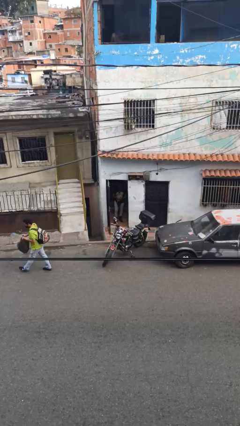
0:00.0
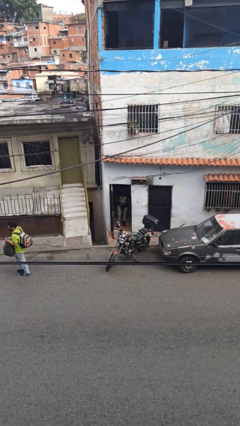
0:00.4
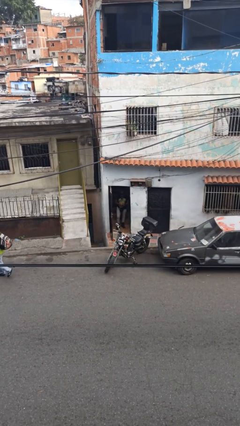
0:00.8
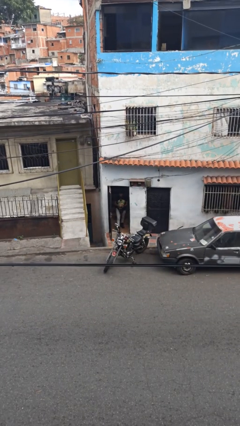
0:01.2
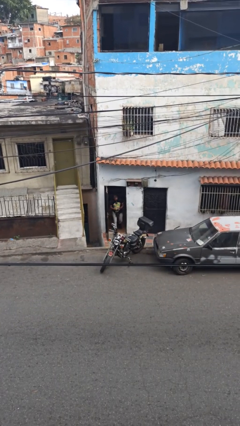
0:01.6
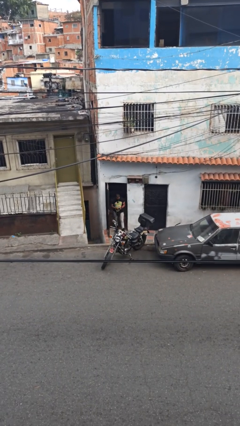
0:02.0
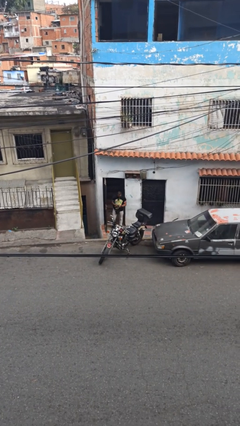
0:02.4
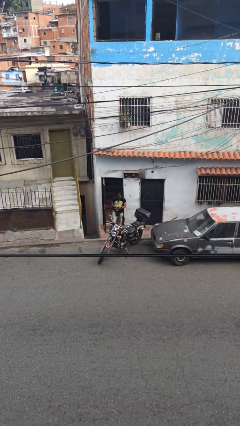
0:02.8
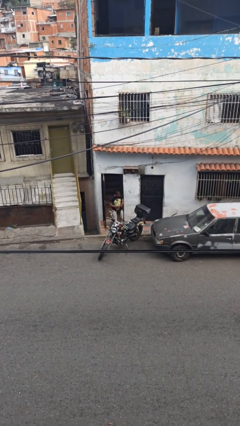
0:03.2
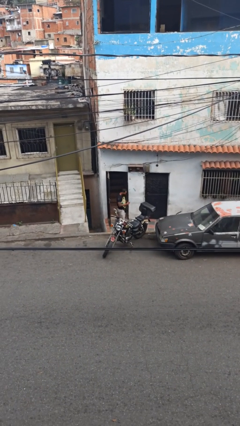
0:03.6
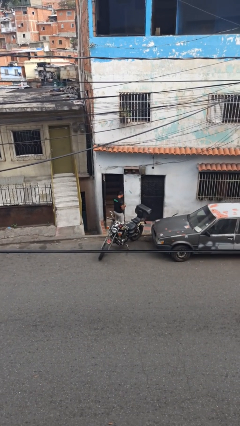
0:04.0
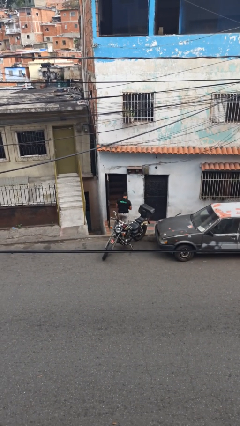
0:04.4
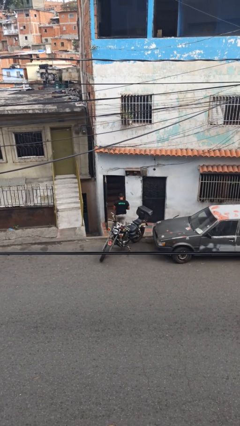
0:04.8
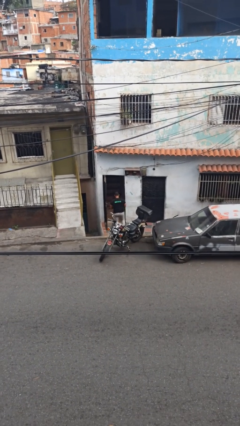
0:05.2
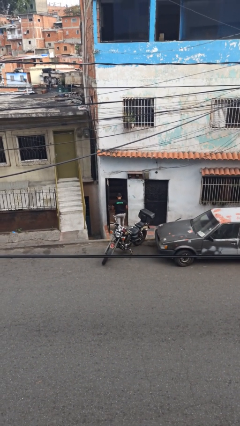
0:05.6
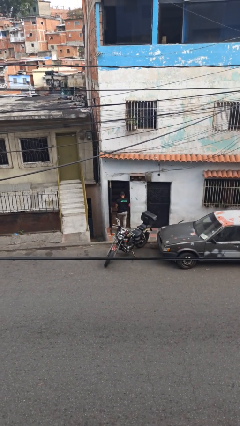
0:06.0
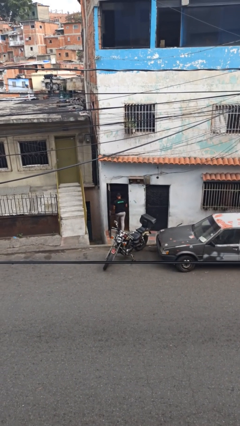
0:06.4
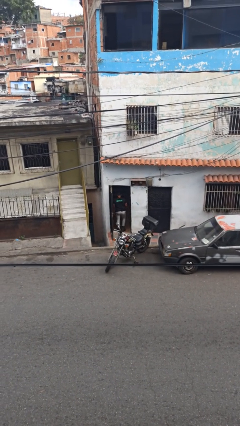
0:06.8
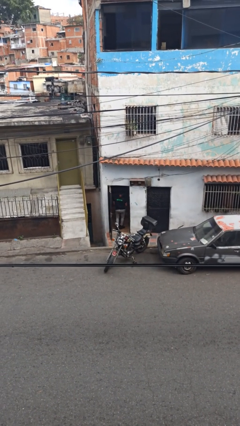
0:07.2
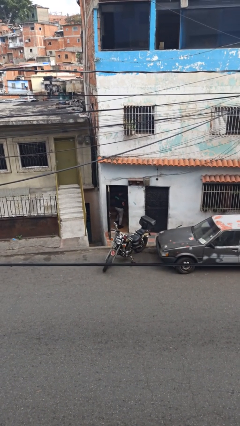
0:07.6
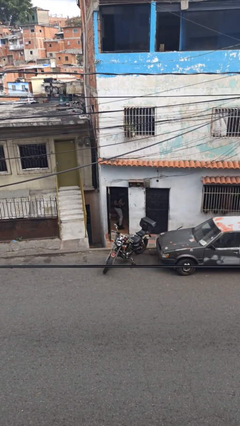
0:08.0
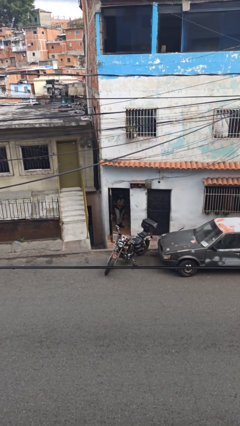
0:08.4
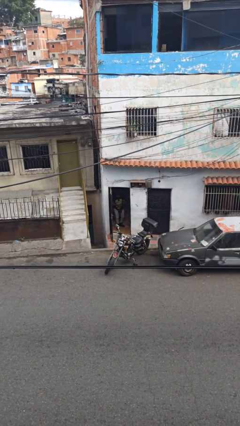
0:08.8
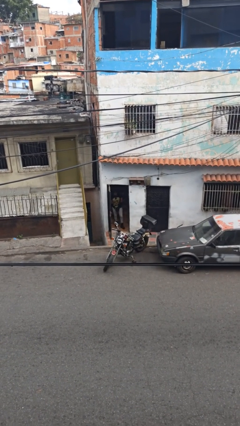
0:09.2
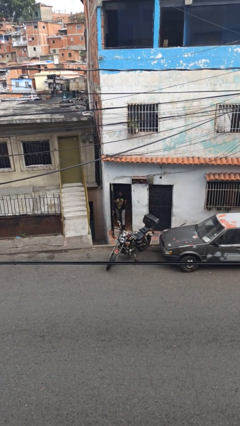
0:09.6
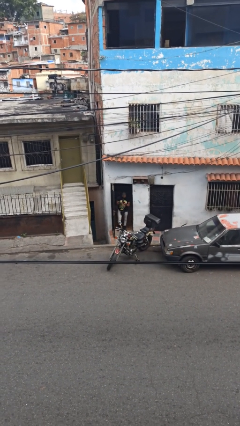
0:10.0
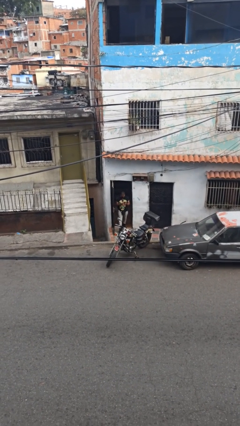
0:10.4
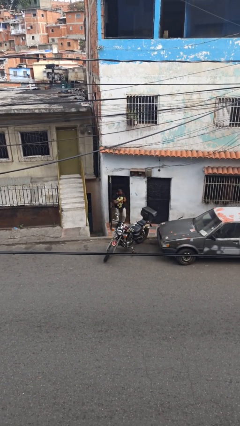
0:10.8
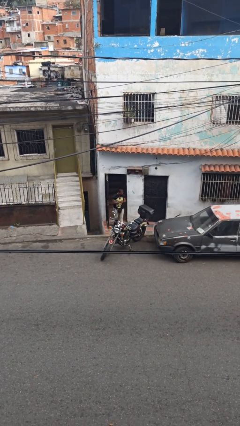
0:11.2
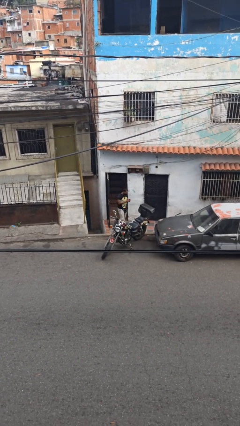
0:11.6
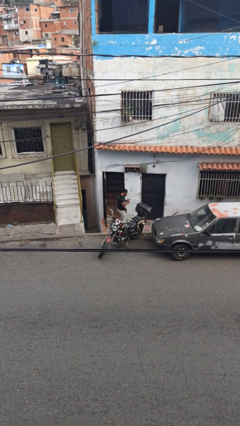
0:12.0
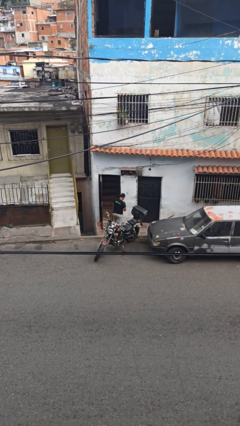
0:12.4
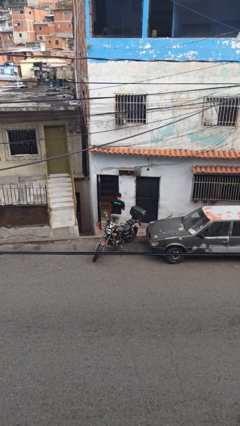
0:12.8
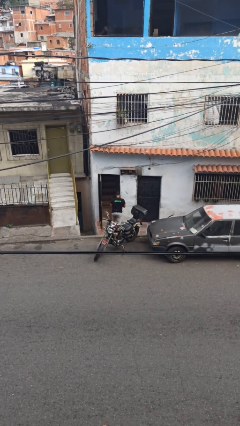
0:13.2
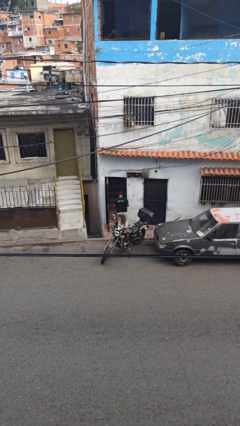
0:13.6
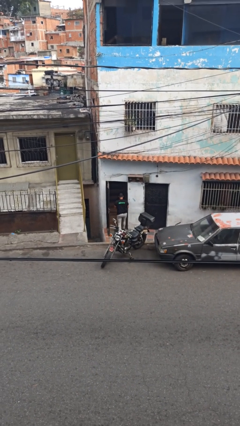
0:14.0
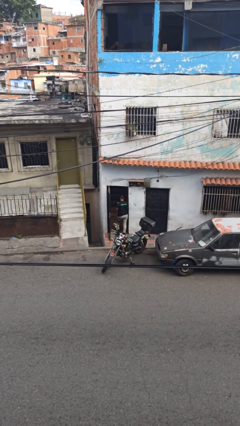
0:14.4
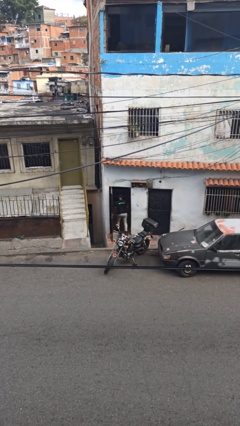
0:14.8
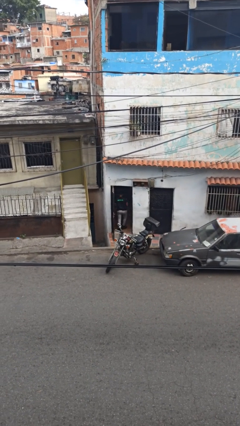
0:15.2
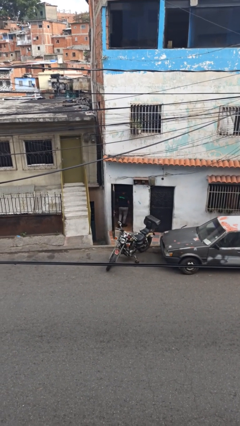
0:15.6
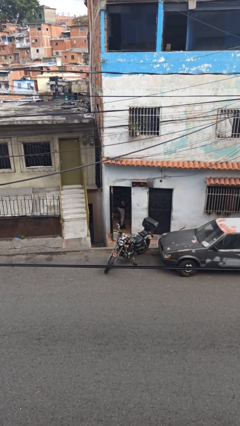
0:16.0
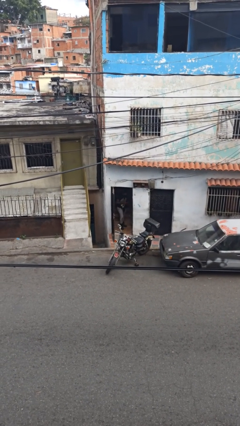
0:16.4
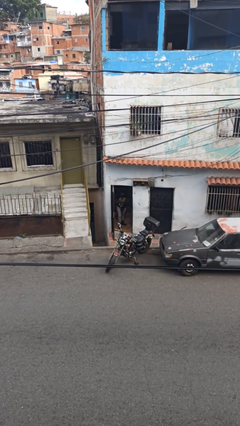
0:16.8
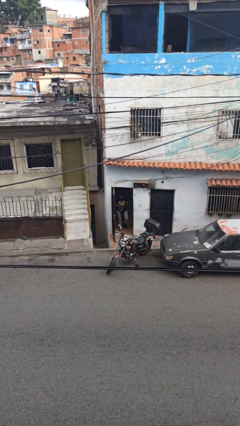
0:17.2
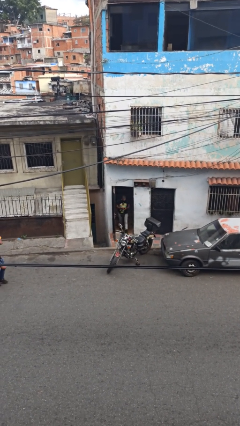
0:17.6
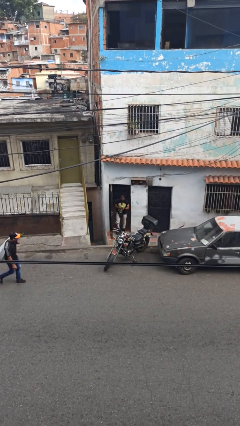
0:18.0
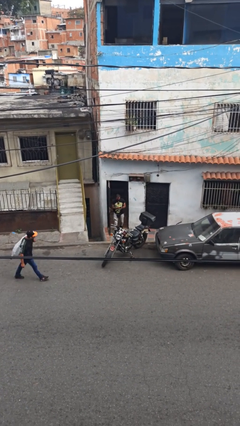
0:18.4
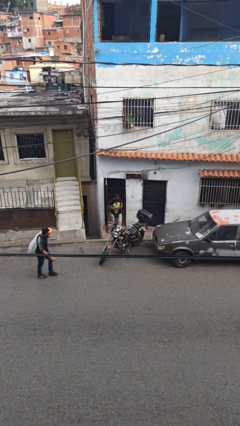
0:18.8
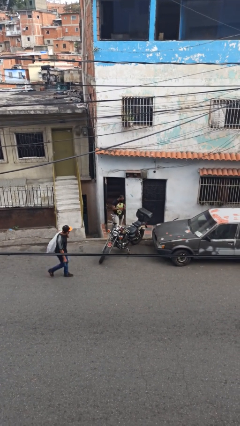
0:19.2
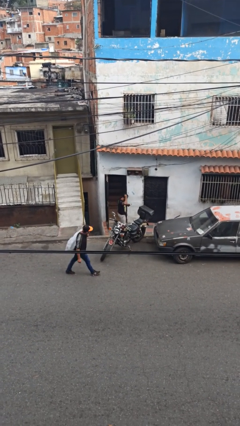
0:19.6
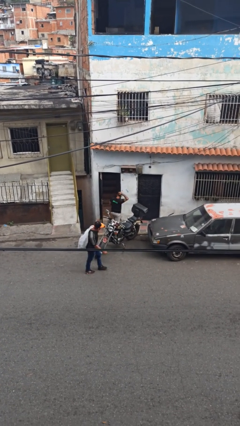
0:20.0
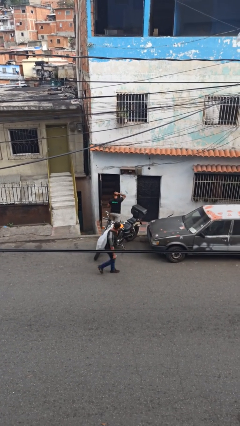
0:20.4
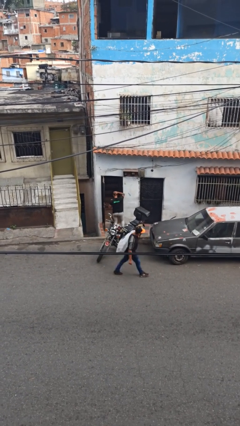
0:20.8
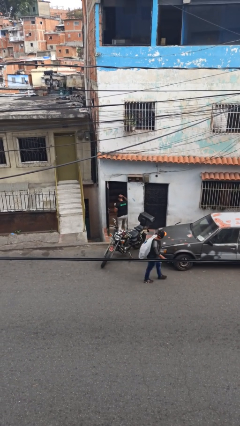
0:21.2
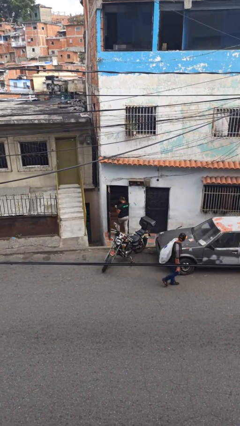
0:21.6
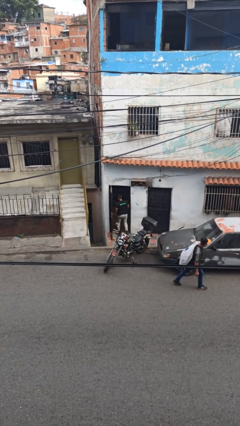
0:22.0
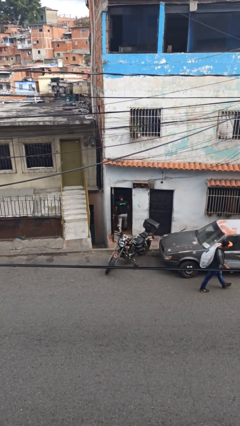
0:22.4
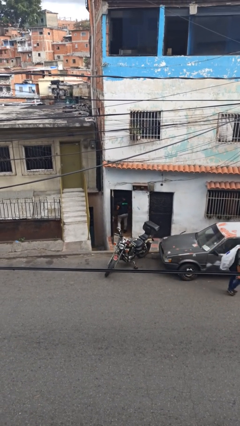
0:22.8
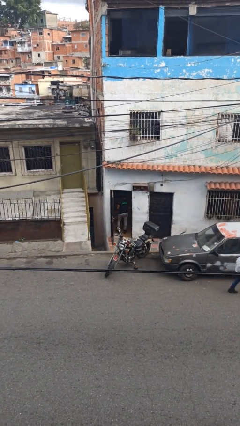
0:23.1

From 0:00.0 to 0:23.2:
person texts on phone

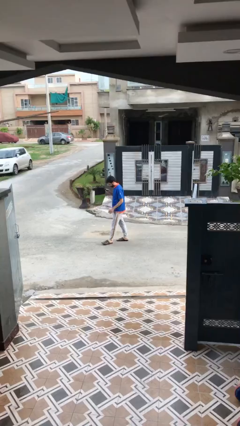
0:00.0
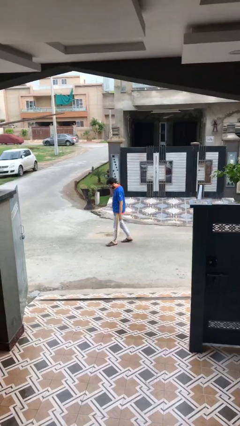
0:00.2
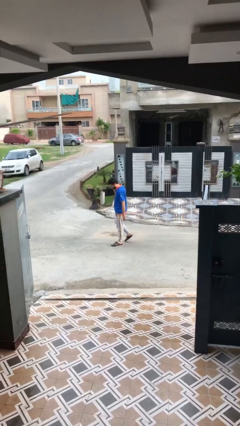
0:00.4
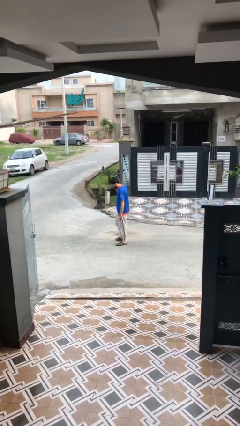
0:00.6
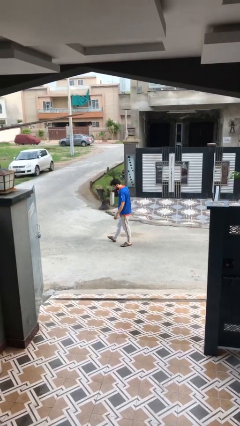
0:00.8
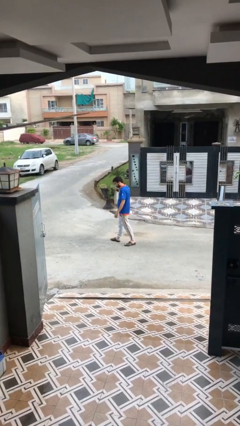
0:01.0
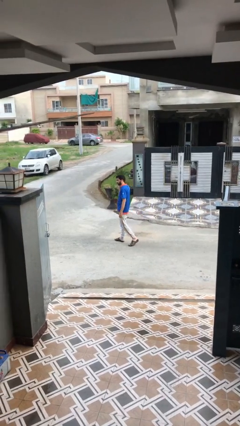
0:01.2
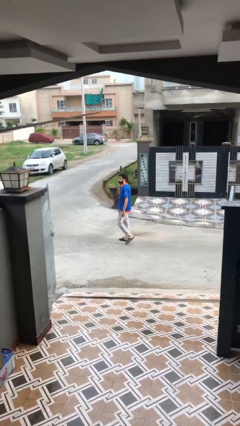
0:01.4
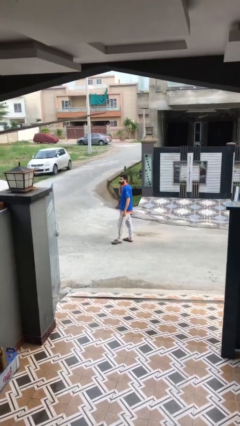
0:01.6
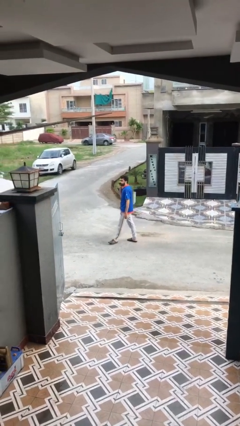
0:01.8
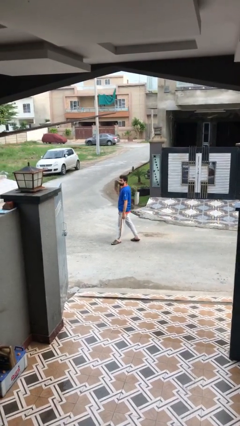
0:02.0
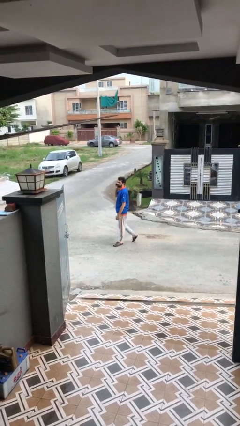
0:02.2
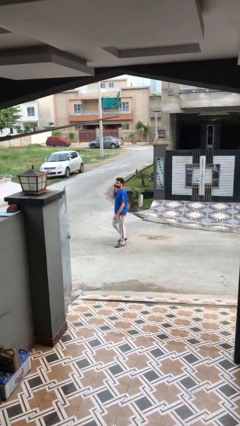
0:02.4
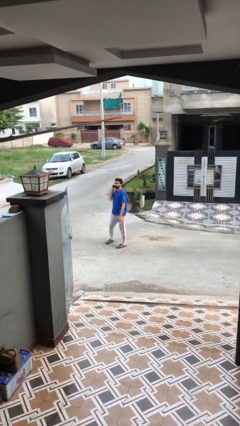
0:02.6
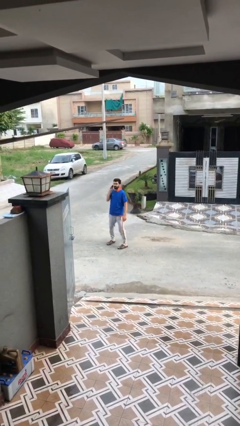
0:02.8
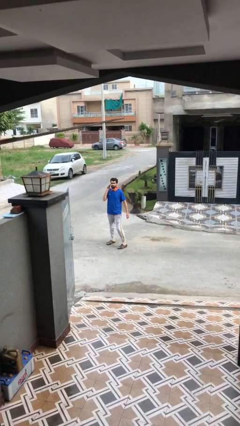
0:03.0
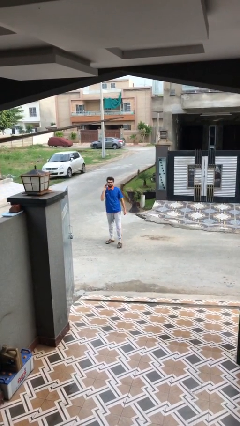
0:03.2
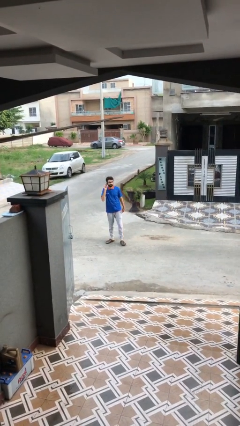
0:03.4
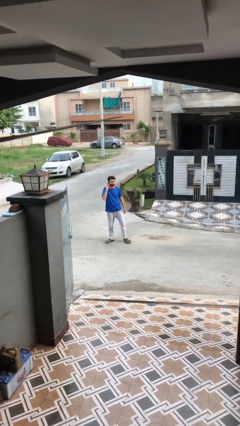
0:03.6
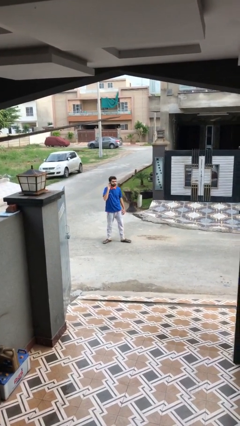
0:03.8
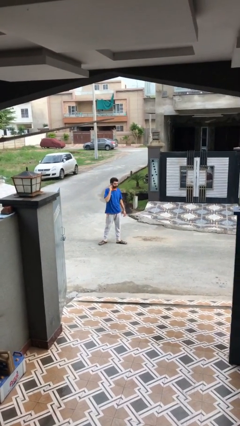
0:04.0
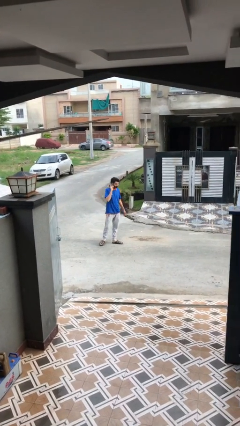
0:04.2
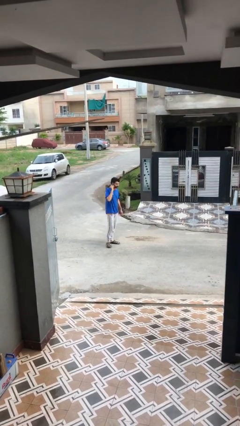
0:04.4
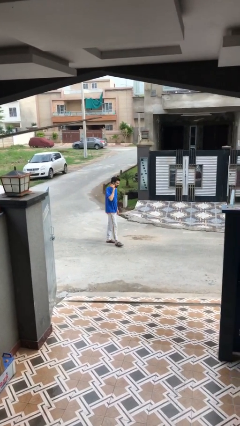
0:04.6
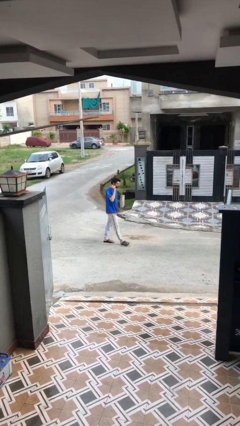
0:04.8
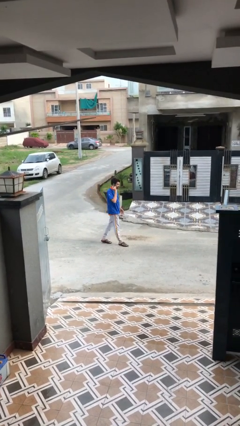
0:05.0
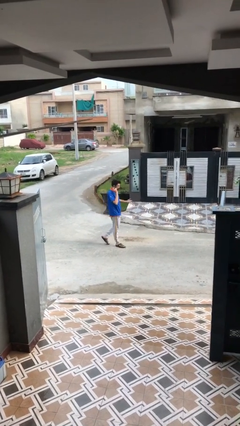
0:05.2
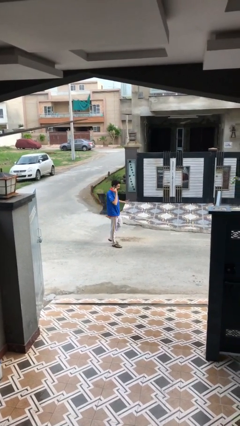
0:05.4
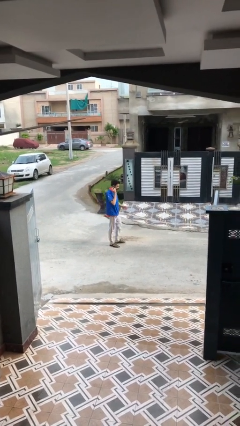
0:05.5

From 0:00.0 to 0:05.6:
person talks on phone

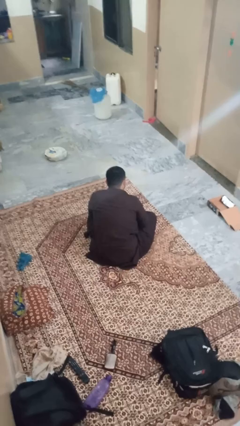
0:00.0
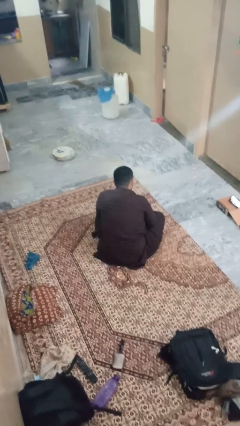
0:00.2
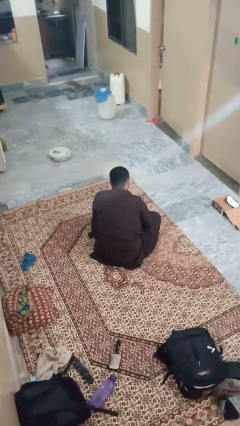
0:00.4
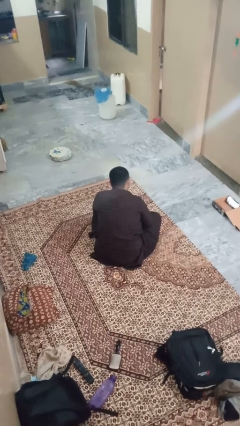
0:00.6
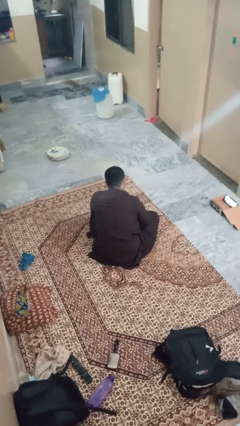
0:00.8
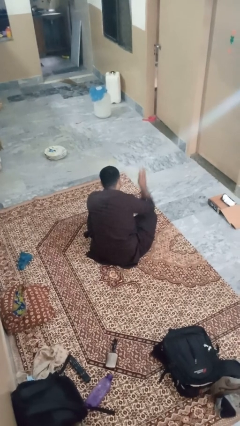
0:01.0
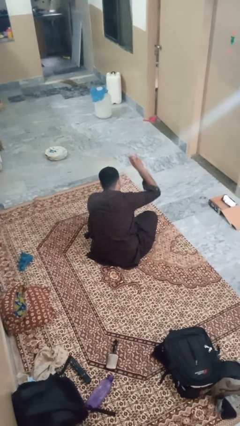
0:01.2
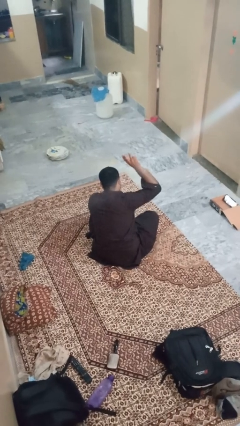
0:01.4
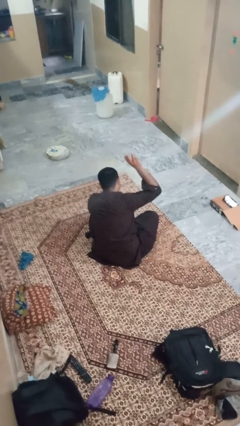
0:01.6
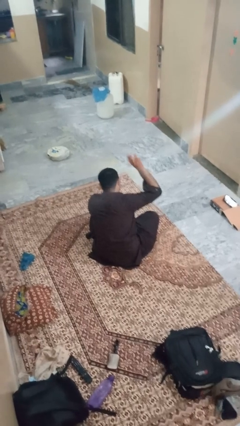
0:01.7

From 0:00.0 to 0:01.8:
person gestures number three
